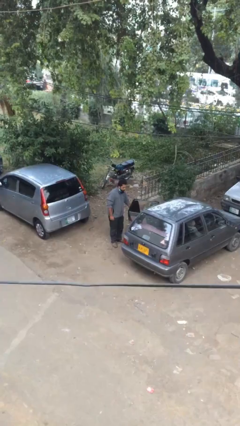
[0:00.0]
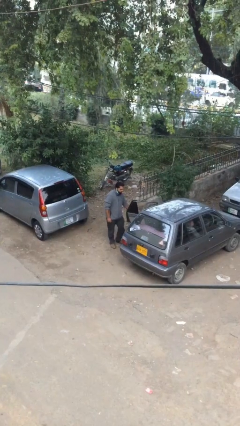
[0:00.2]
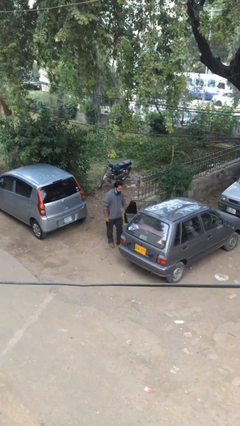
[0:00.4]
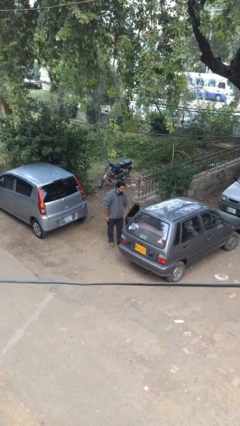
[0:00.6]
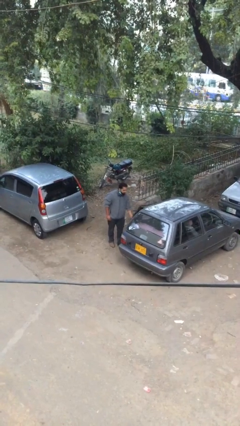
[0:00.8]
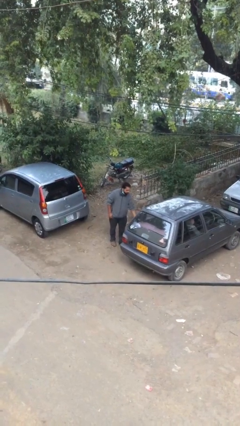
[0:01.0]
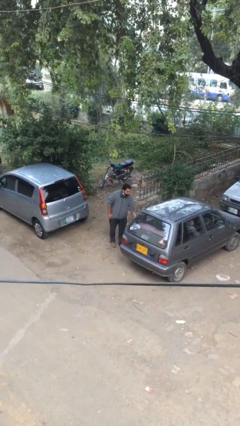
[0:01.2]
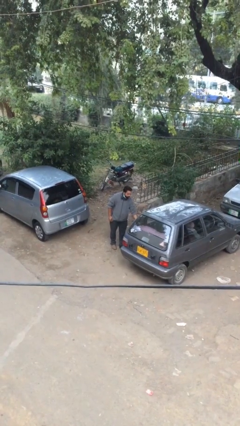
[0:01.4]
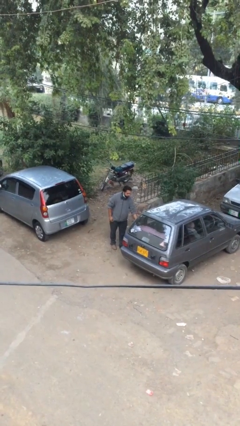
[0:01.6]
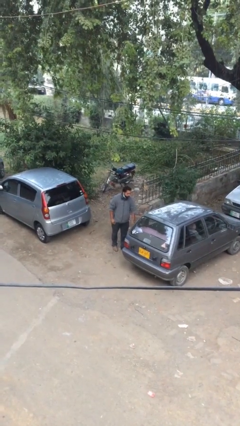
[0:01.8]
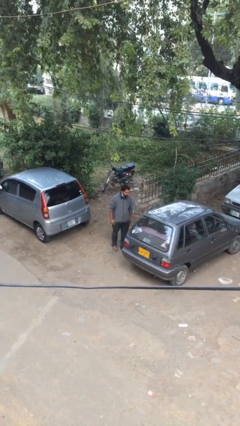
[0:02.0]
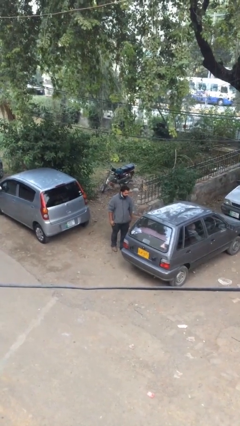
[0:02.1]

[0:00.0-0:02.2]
person closes car door

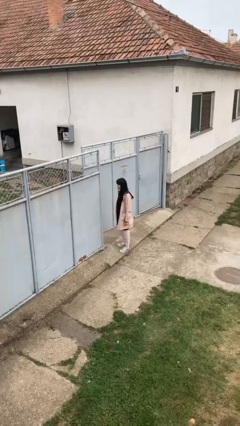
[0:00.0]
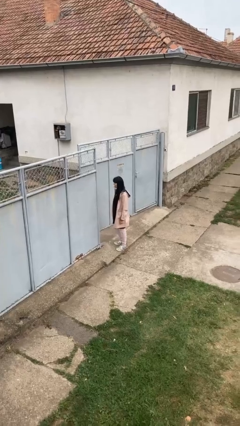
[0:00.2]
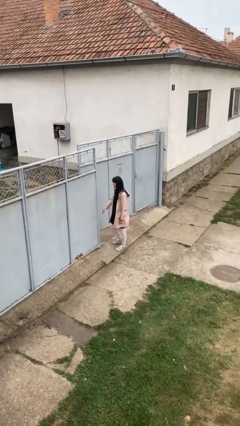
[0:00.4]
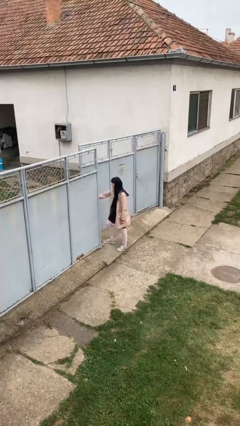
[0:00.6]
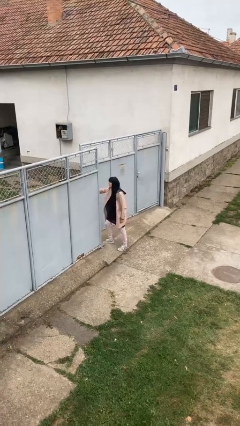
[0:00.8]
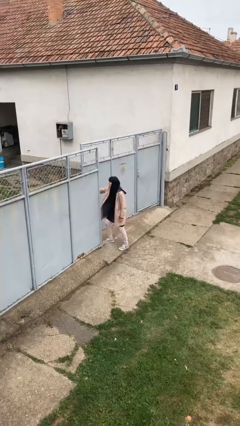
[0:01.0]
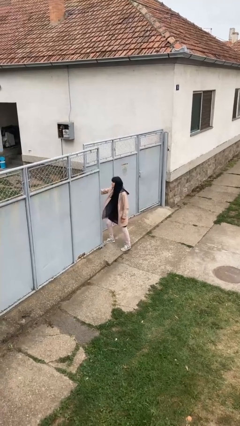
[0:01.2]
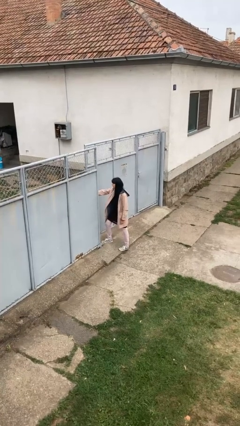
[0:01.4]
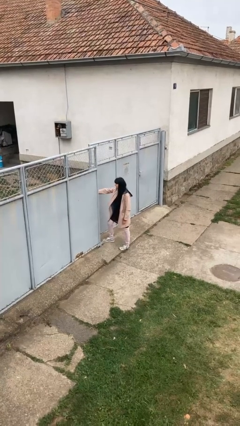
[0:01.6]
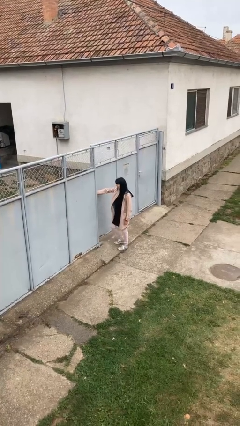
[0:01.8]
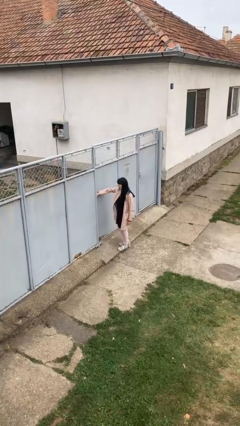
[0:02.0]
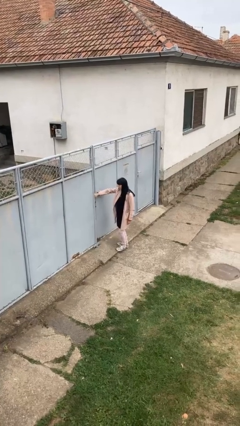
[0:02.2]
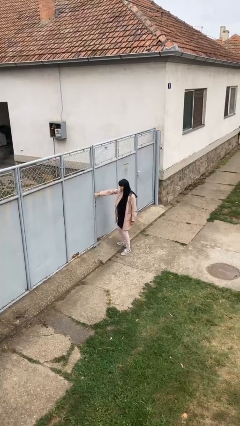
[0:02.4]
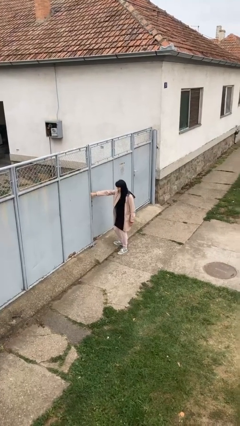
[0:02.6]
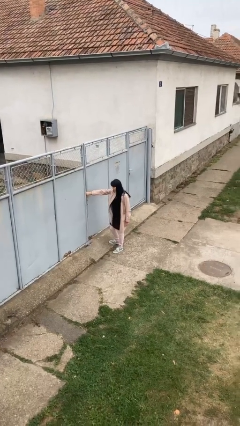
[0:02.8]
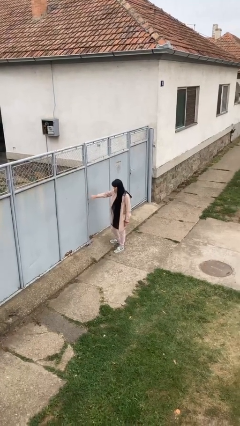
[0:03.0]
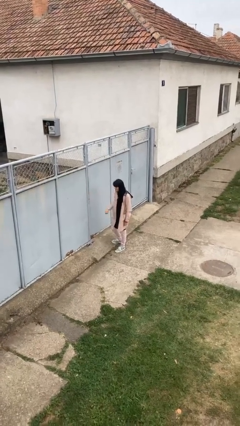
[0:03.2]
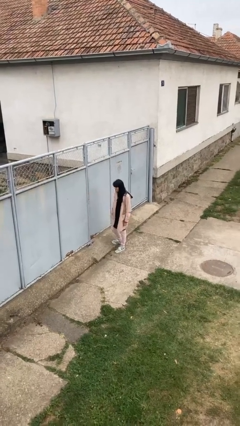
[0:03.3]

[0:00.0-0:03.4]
person closes gate

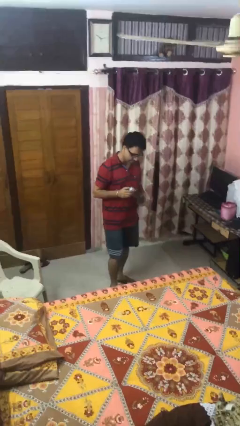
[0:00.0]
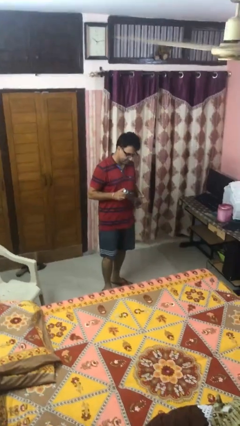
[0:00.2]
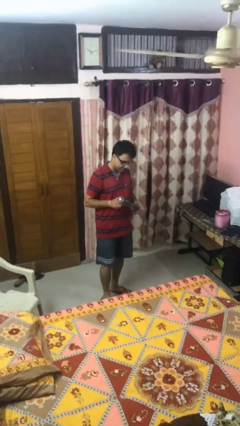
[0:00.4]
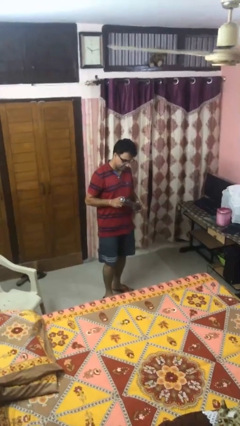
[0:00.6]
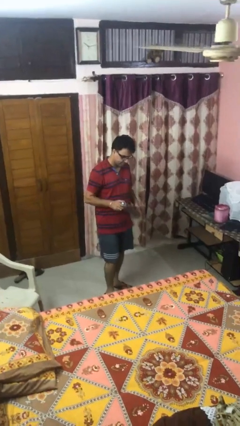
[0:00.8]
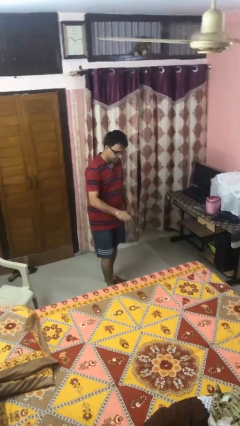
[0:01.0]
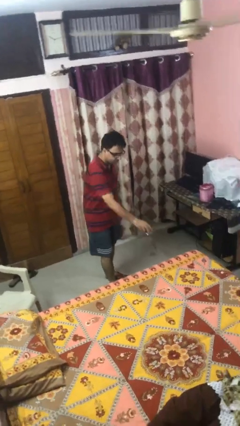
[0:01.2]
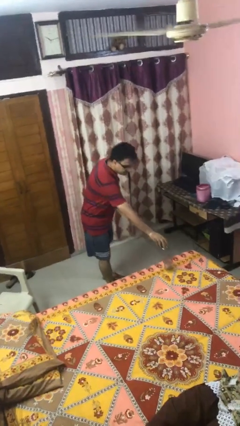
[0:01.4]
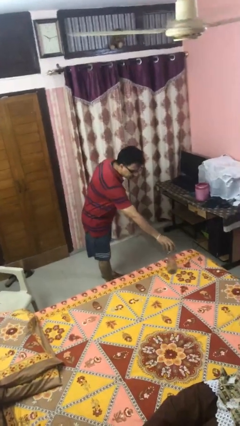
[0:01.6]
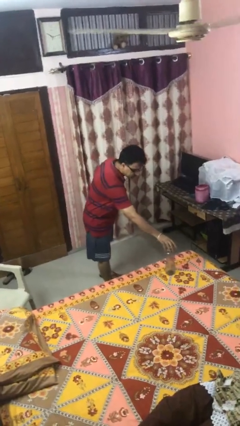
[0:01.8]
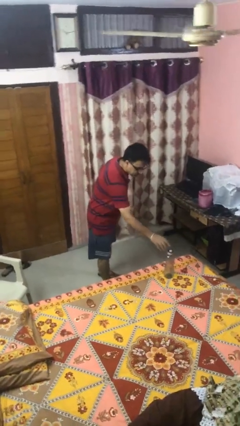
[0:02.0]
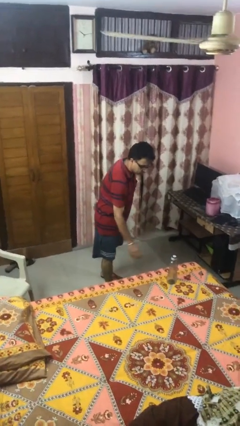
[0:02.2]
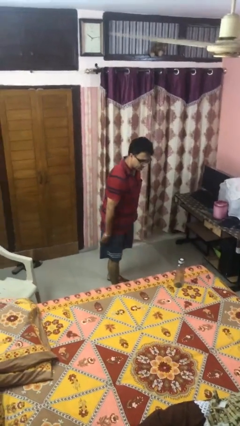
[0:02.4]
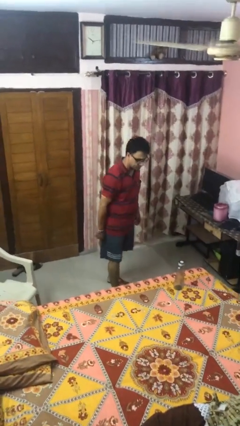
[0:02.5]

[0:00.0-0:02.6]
person puts down object on bed

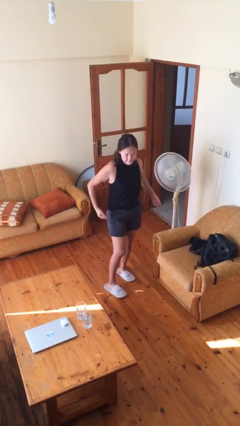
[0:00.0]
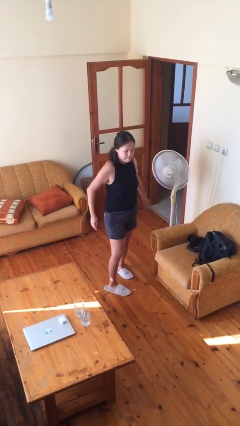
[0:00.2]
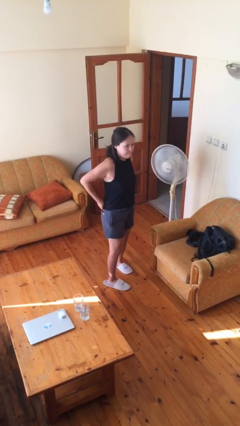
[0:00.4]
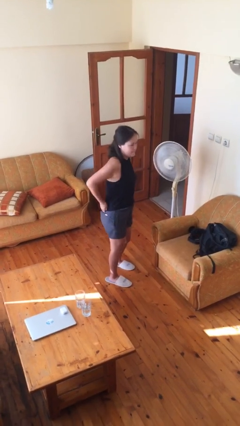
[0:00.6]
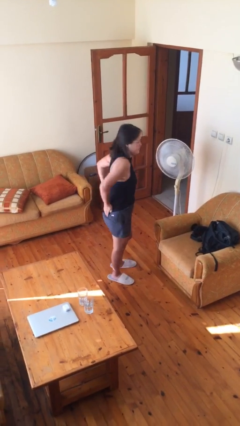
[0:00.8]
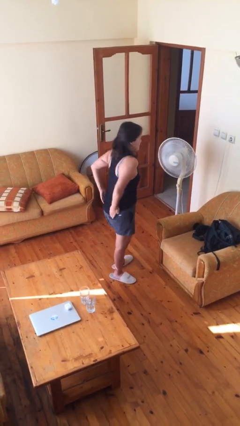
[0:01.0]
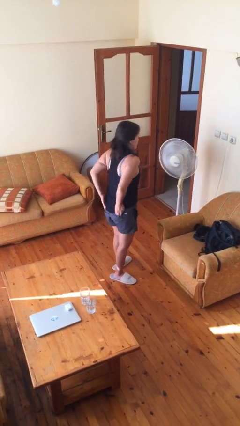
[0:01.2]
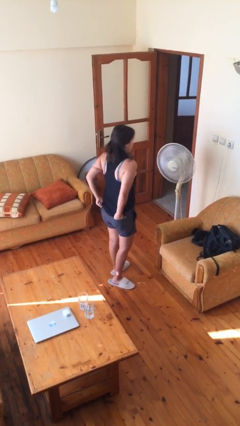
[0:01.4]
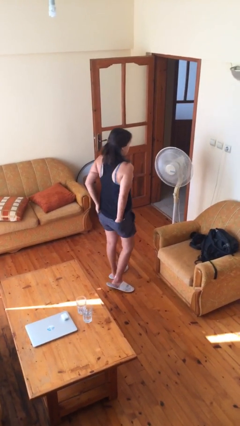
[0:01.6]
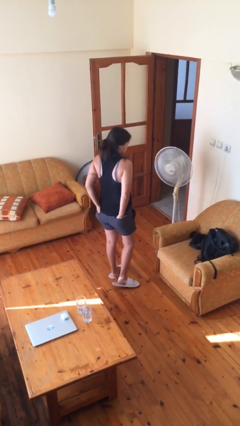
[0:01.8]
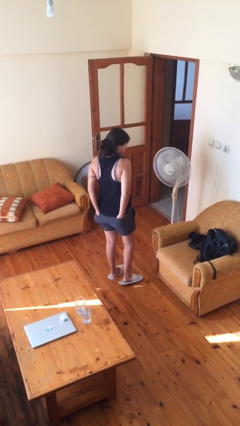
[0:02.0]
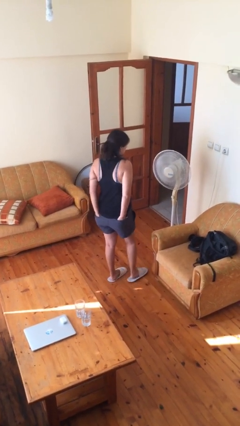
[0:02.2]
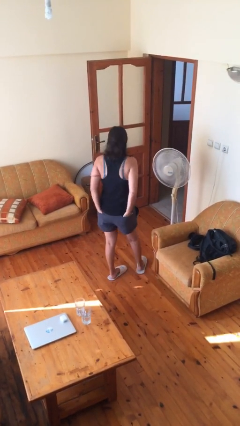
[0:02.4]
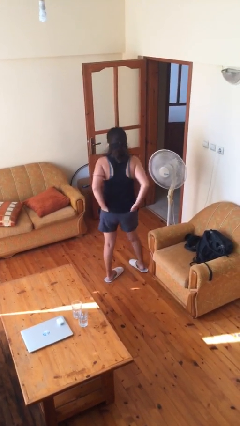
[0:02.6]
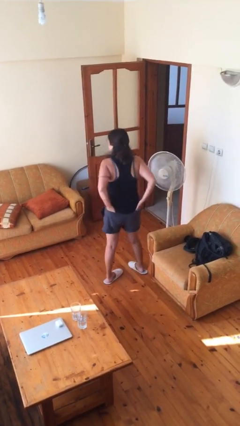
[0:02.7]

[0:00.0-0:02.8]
person puts hands in back pockets

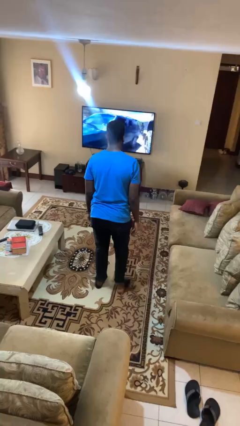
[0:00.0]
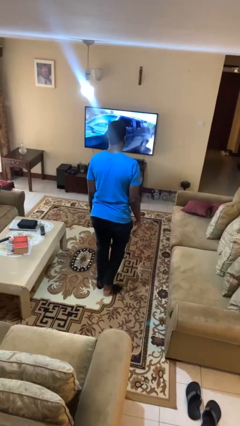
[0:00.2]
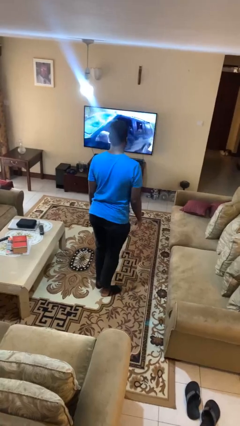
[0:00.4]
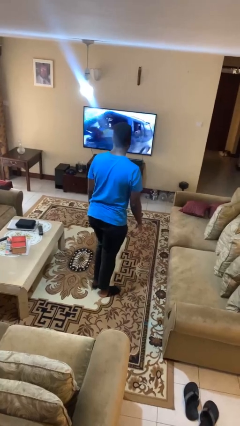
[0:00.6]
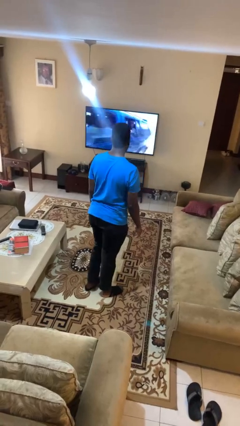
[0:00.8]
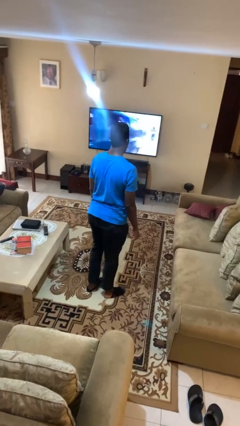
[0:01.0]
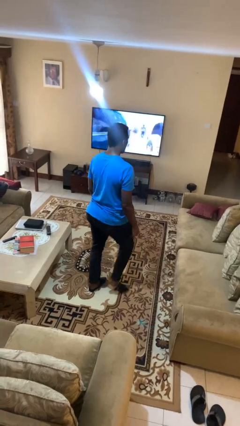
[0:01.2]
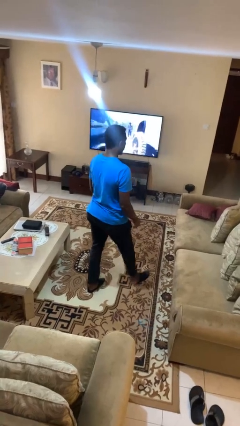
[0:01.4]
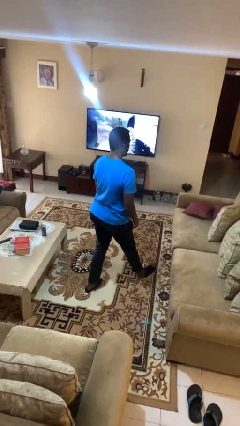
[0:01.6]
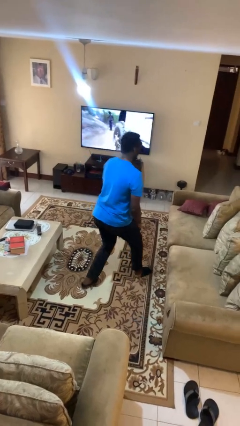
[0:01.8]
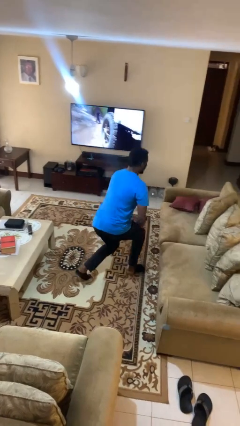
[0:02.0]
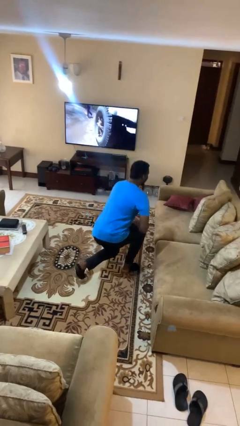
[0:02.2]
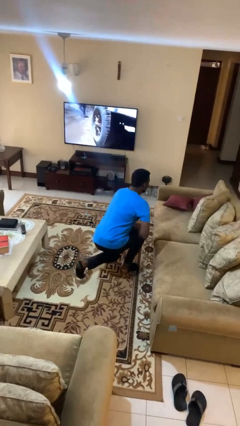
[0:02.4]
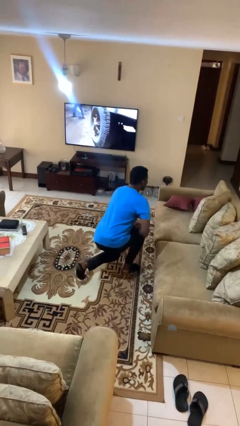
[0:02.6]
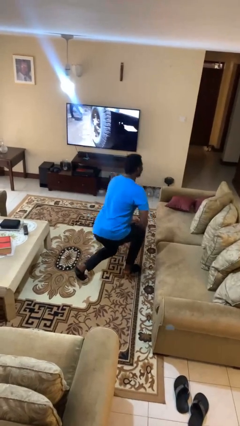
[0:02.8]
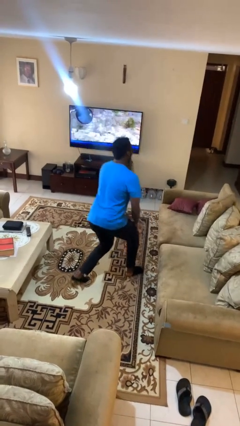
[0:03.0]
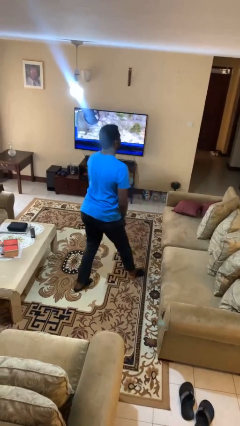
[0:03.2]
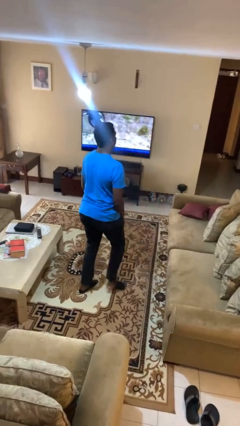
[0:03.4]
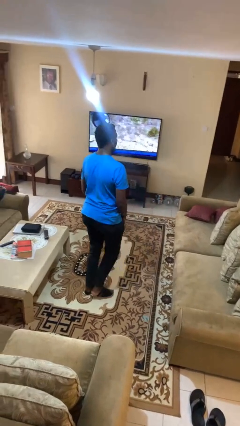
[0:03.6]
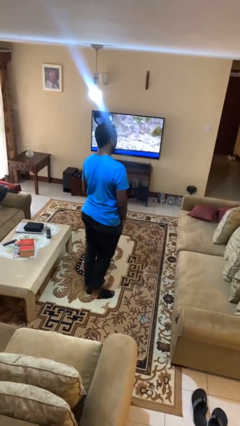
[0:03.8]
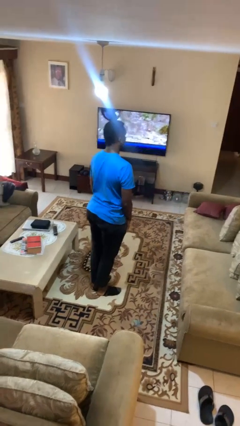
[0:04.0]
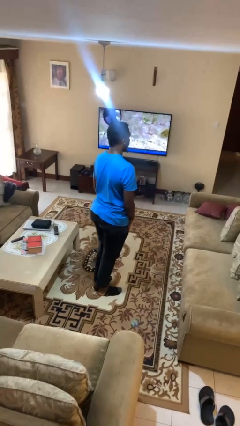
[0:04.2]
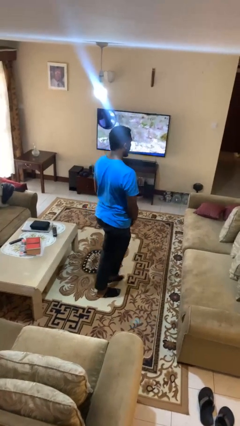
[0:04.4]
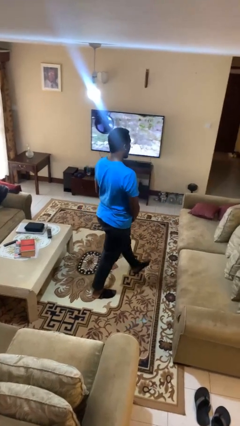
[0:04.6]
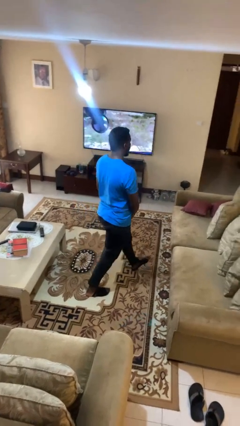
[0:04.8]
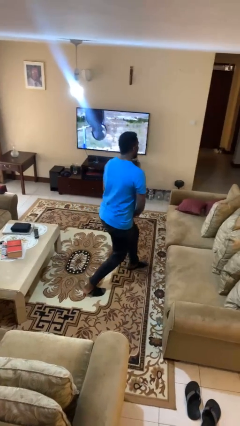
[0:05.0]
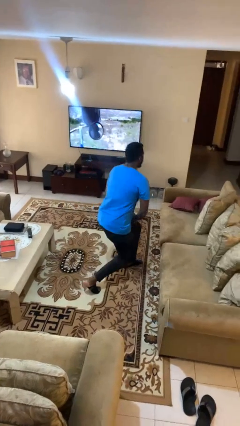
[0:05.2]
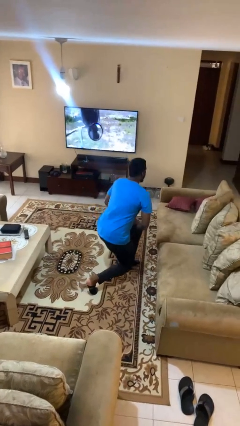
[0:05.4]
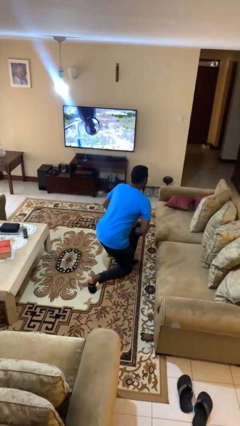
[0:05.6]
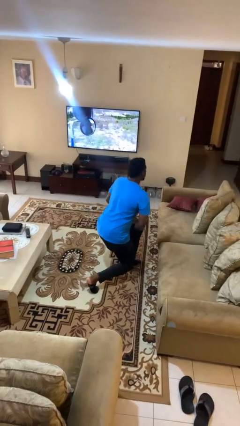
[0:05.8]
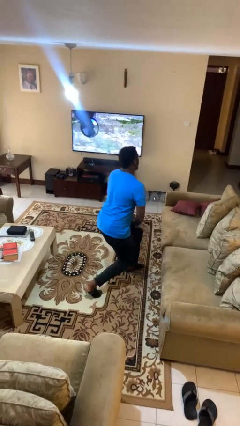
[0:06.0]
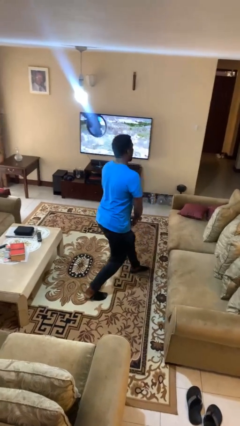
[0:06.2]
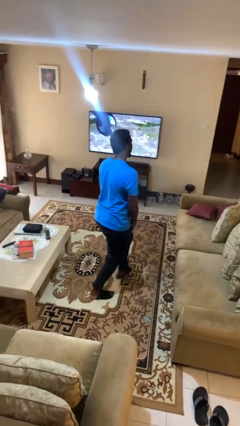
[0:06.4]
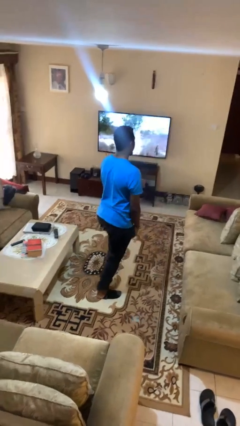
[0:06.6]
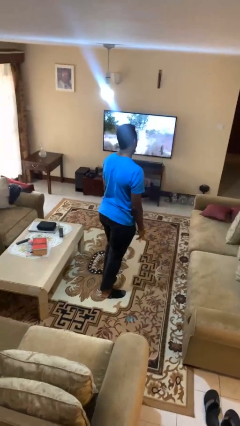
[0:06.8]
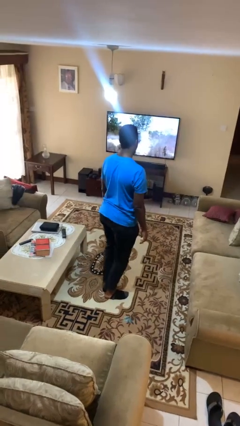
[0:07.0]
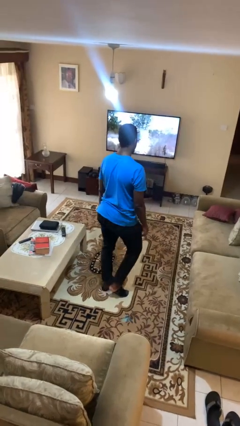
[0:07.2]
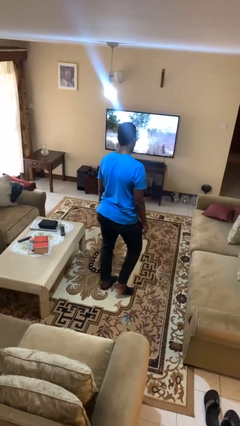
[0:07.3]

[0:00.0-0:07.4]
person exercises with lunges
